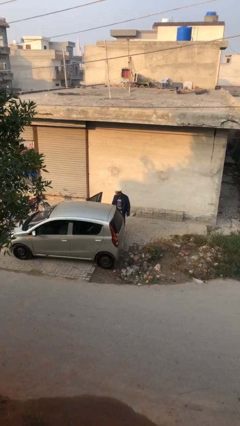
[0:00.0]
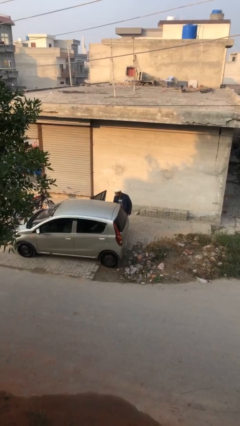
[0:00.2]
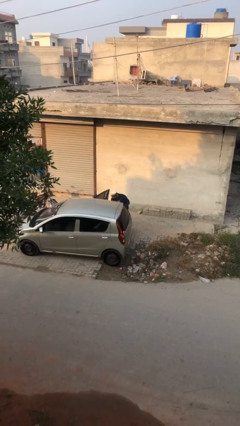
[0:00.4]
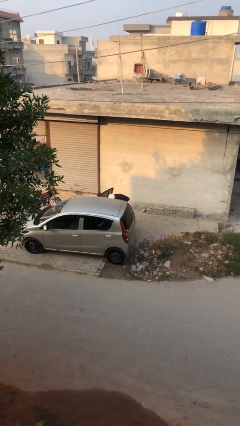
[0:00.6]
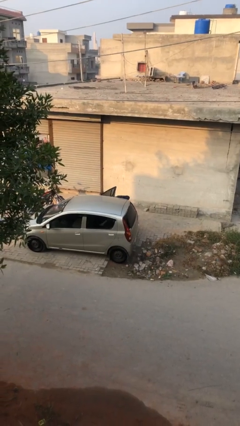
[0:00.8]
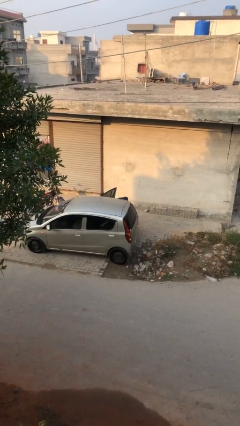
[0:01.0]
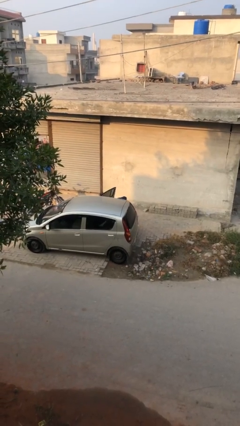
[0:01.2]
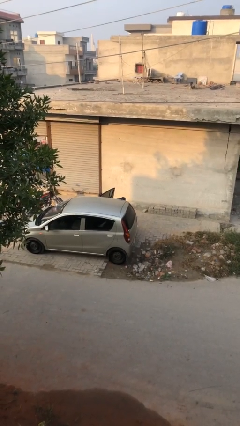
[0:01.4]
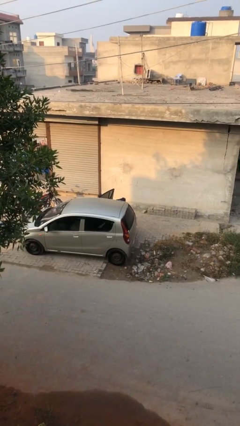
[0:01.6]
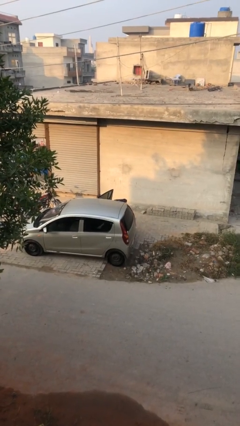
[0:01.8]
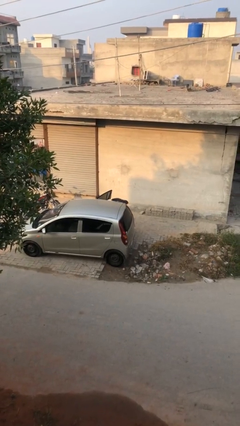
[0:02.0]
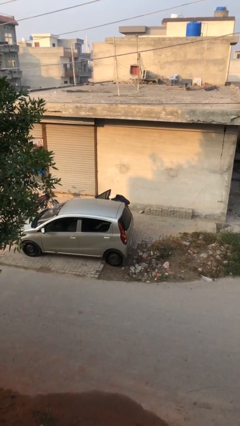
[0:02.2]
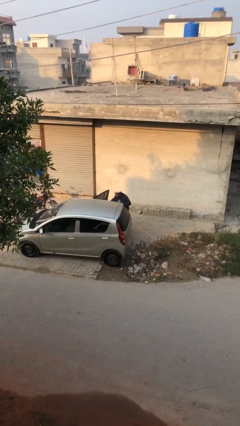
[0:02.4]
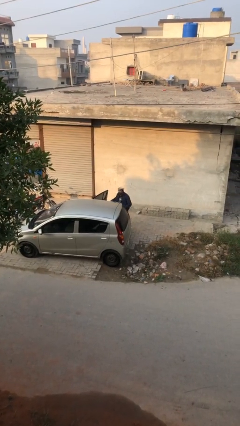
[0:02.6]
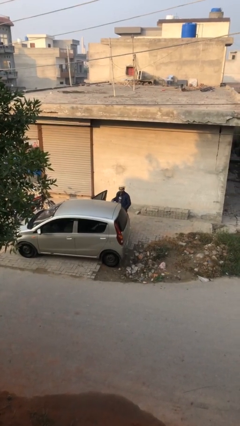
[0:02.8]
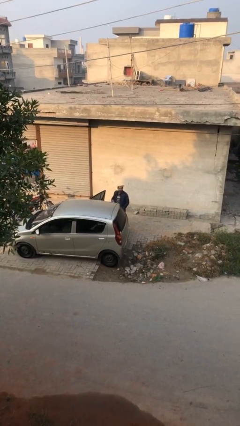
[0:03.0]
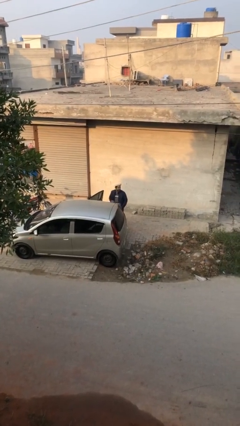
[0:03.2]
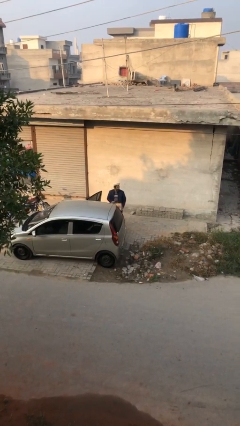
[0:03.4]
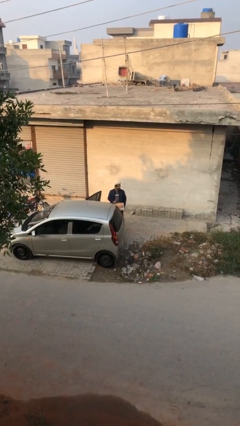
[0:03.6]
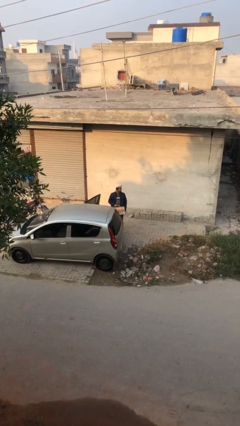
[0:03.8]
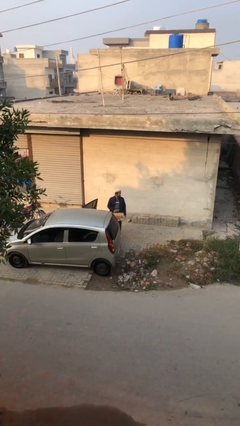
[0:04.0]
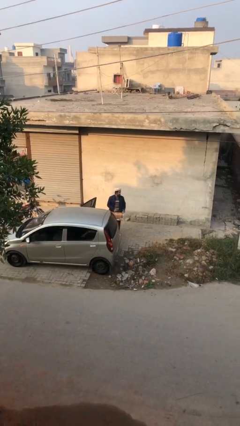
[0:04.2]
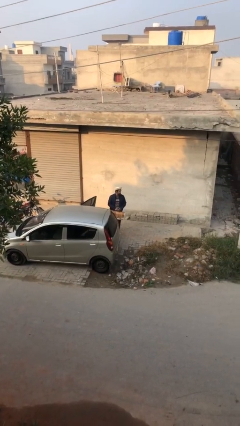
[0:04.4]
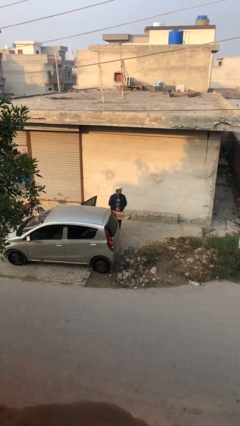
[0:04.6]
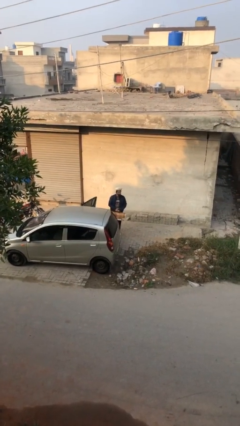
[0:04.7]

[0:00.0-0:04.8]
person unloads car

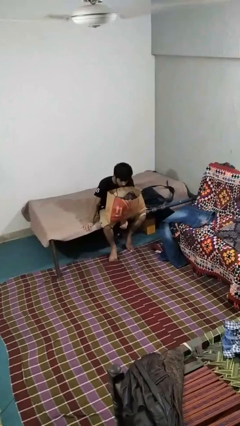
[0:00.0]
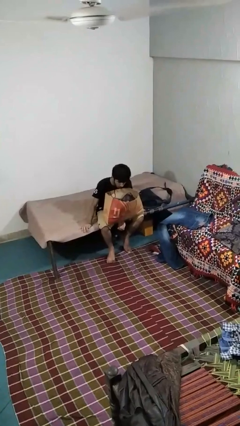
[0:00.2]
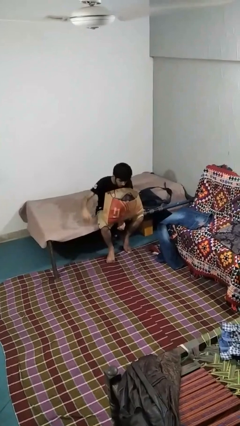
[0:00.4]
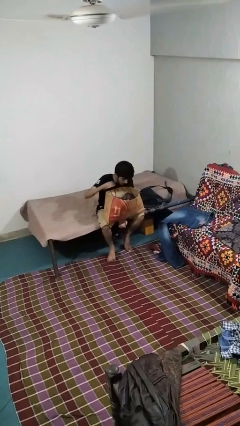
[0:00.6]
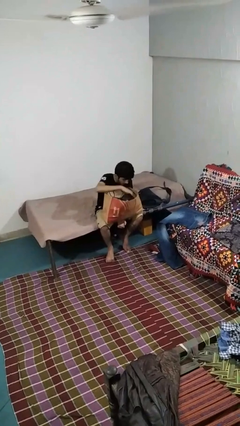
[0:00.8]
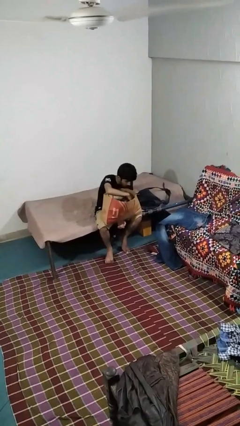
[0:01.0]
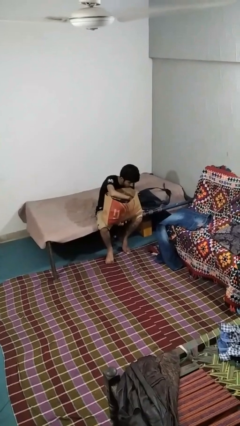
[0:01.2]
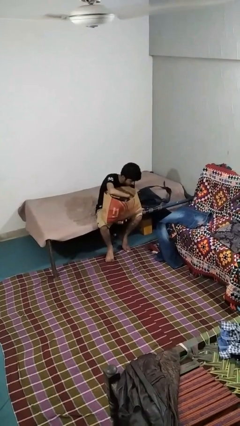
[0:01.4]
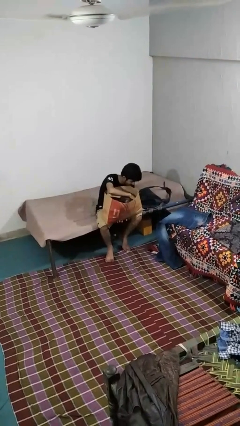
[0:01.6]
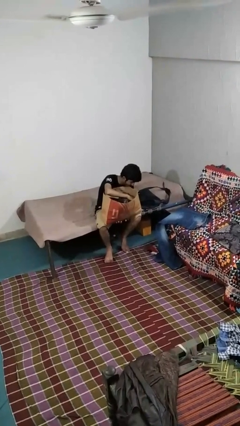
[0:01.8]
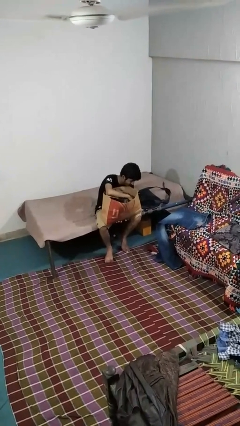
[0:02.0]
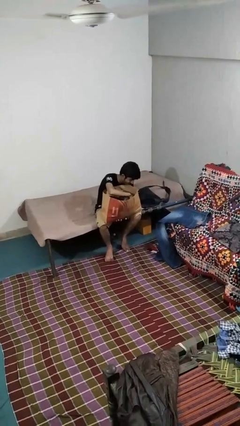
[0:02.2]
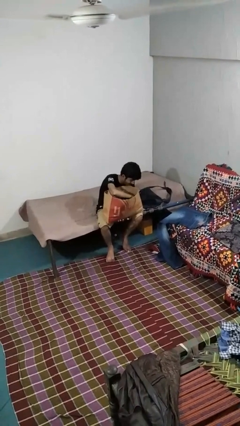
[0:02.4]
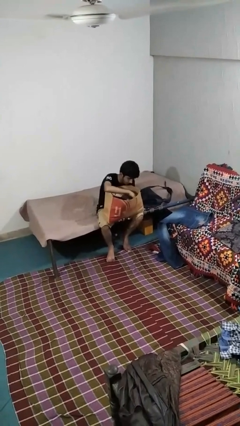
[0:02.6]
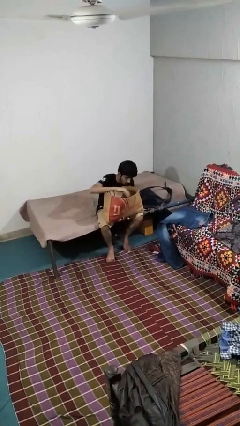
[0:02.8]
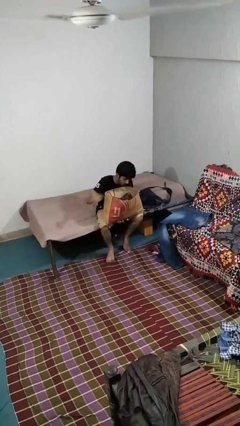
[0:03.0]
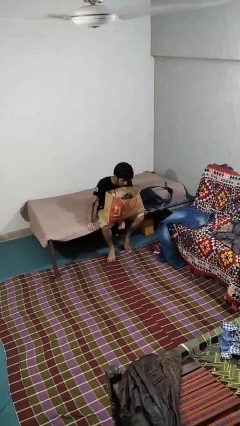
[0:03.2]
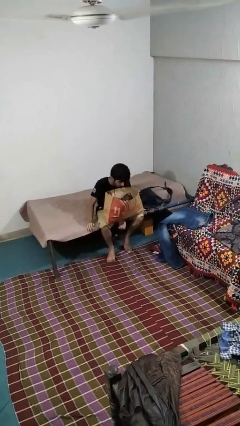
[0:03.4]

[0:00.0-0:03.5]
person searches in bag

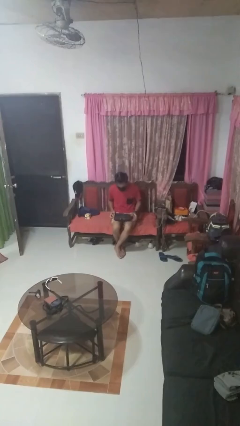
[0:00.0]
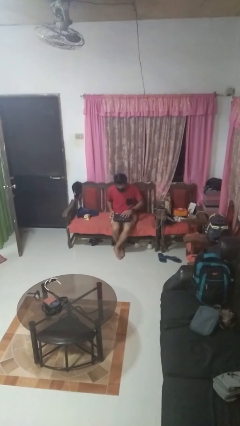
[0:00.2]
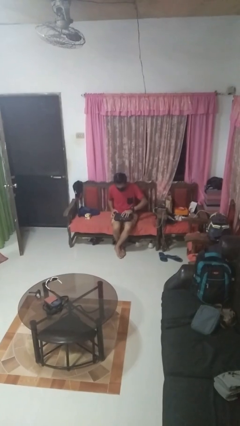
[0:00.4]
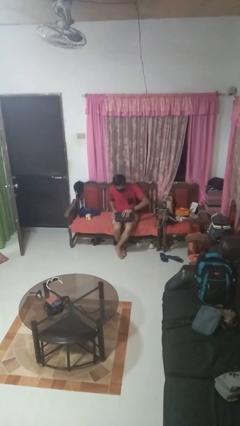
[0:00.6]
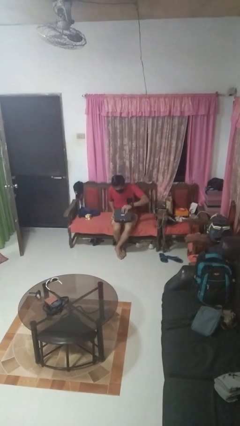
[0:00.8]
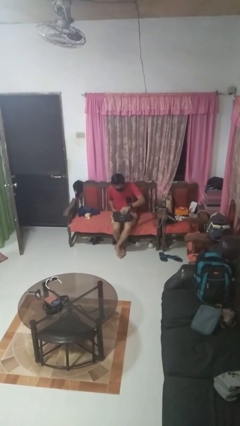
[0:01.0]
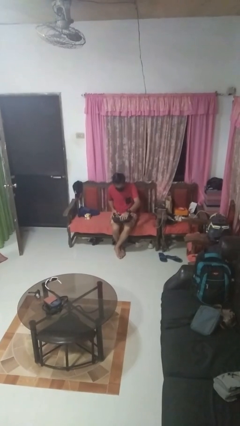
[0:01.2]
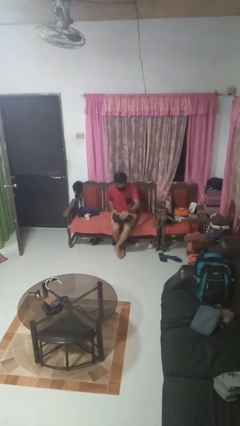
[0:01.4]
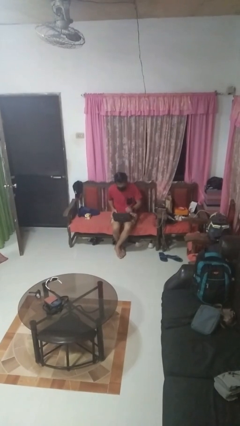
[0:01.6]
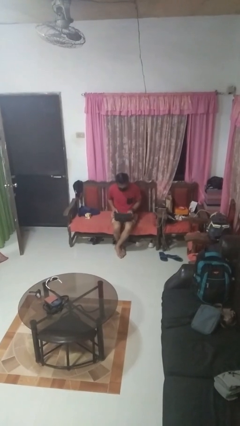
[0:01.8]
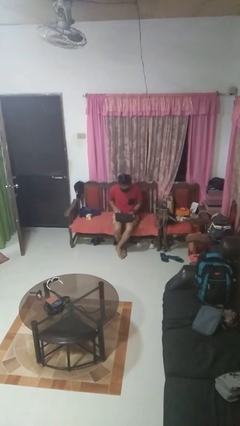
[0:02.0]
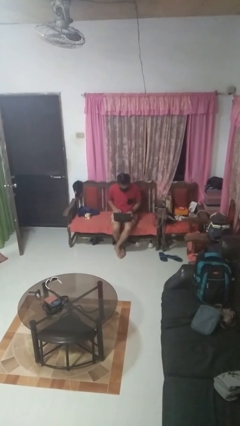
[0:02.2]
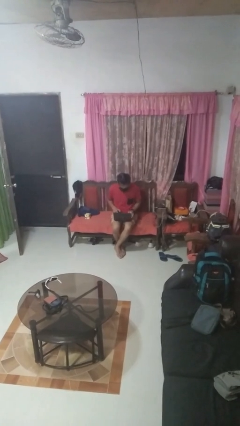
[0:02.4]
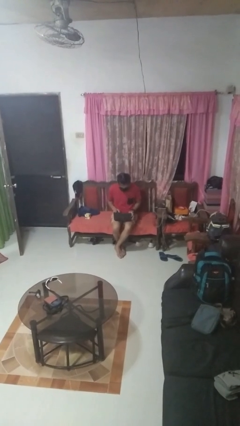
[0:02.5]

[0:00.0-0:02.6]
person opens laptop

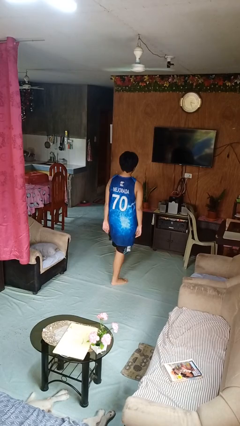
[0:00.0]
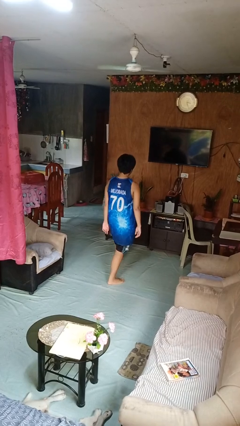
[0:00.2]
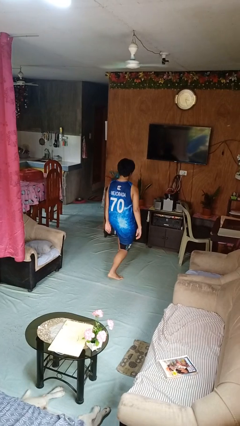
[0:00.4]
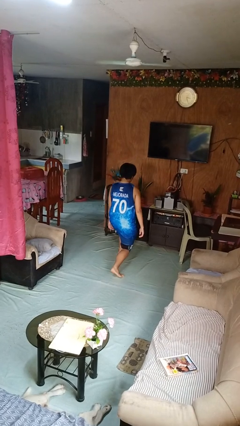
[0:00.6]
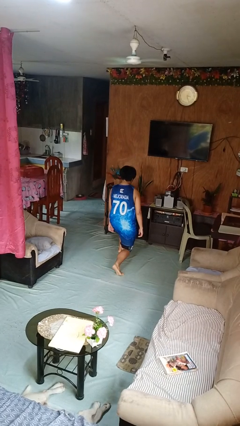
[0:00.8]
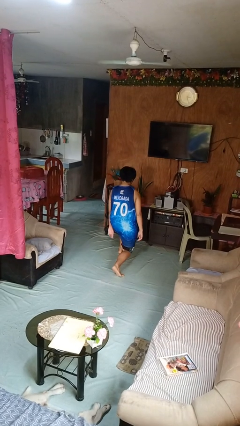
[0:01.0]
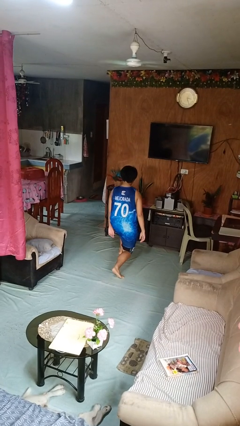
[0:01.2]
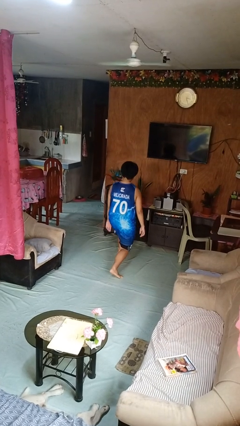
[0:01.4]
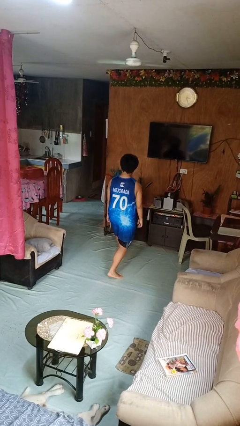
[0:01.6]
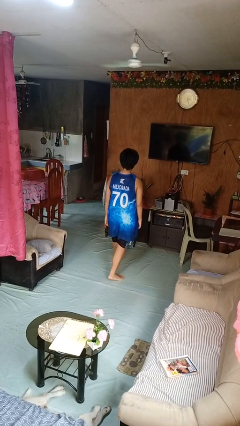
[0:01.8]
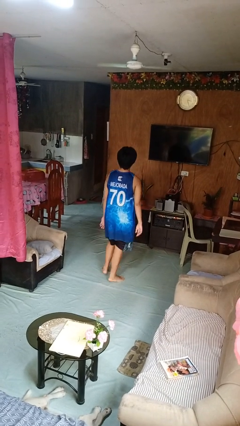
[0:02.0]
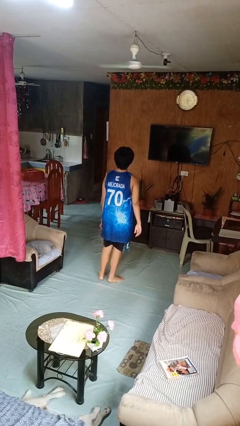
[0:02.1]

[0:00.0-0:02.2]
person exercises with lunges

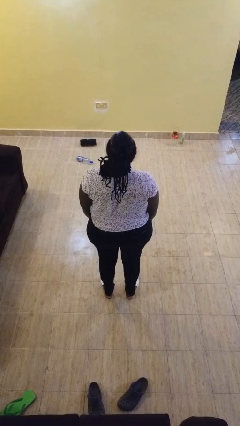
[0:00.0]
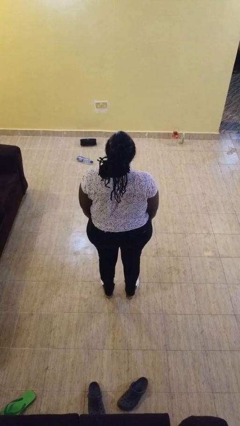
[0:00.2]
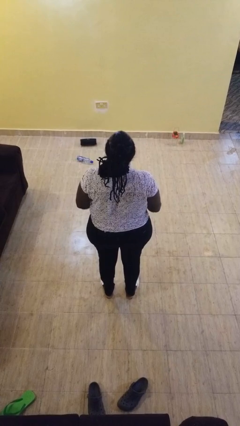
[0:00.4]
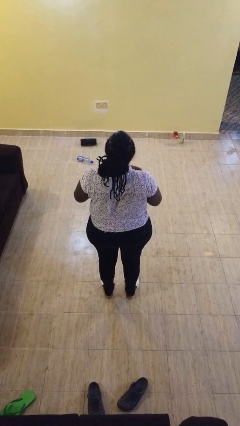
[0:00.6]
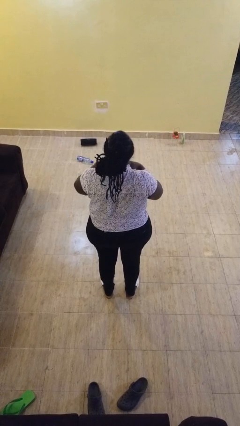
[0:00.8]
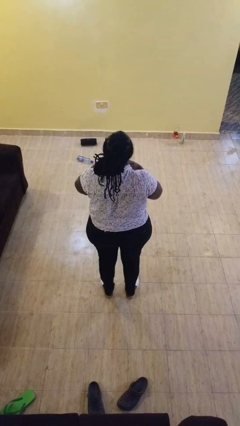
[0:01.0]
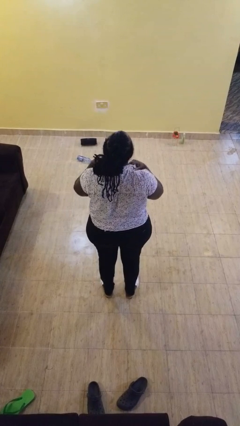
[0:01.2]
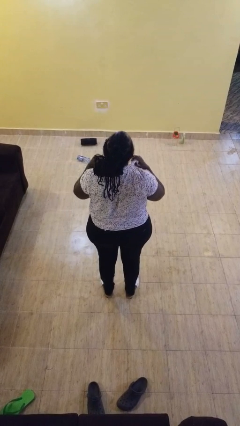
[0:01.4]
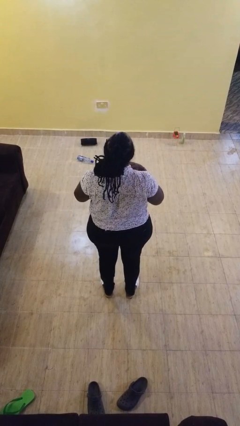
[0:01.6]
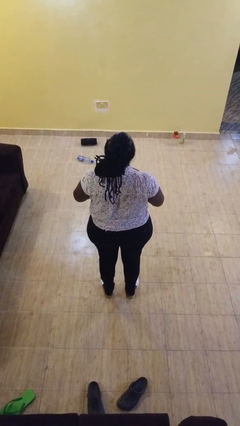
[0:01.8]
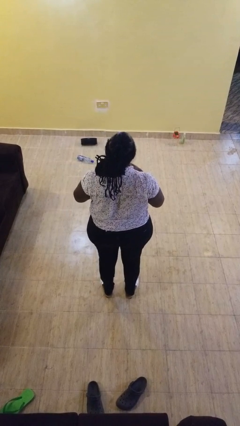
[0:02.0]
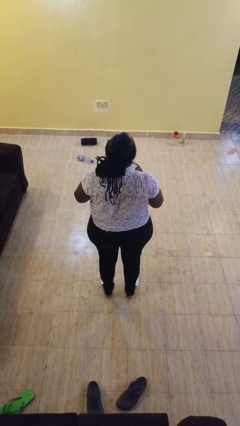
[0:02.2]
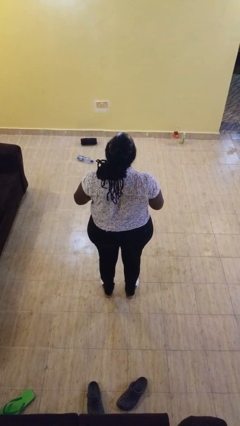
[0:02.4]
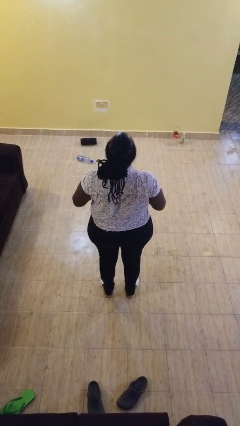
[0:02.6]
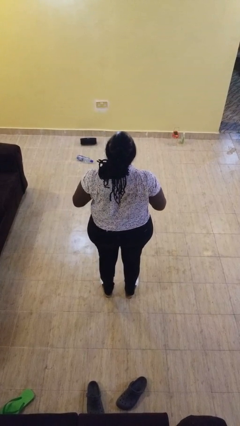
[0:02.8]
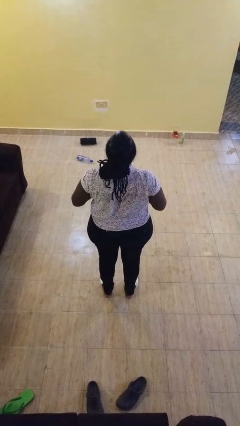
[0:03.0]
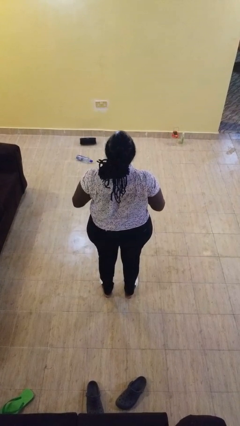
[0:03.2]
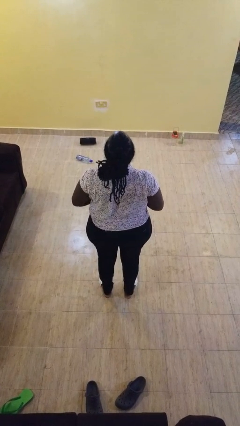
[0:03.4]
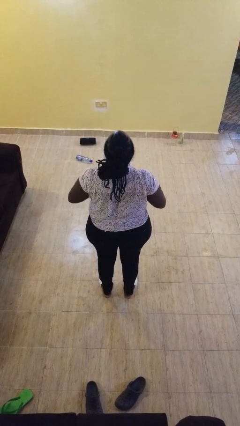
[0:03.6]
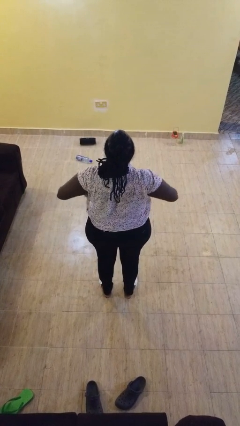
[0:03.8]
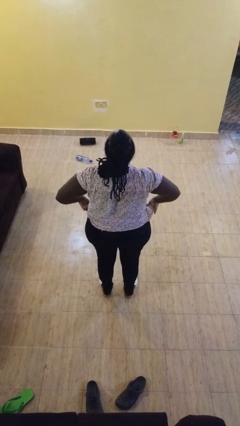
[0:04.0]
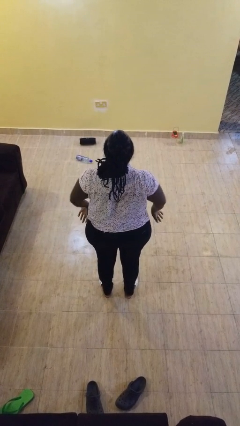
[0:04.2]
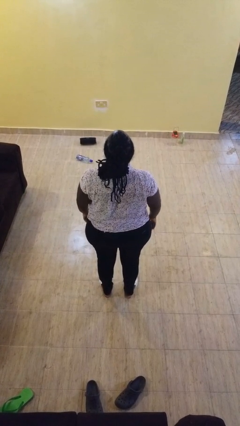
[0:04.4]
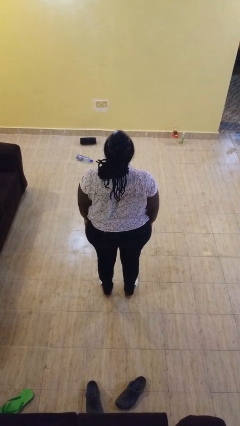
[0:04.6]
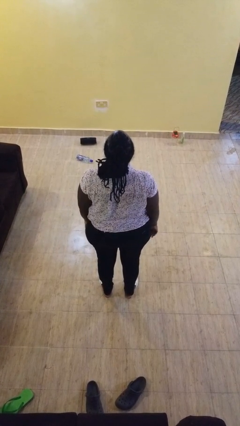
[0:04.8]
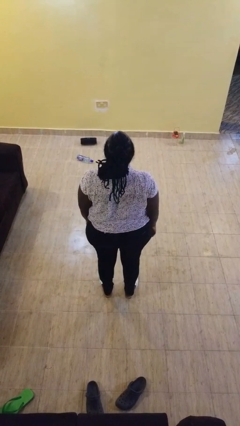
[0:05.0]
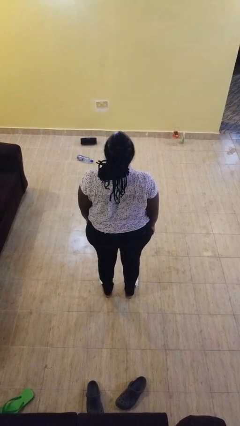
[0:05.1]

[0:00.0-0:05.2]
person unbuttons shirt
